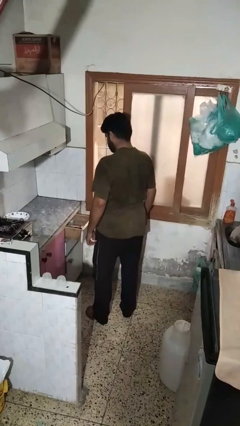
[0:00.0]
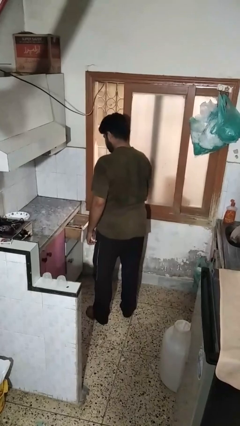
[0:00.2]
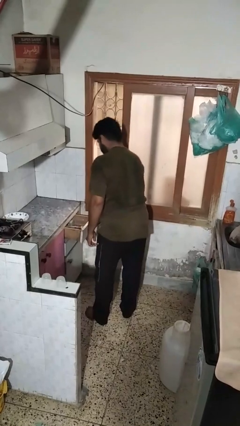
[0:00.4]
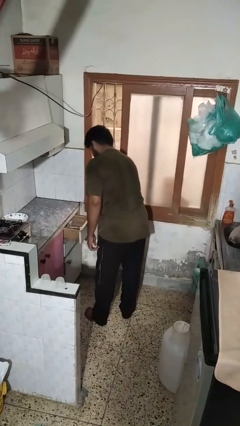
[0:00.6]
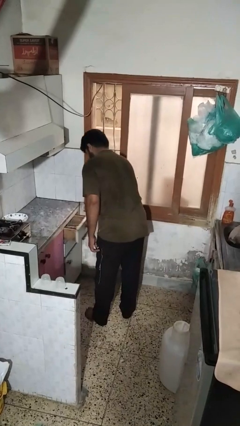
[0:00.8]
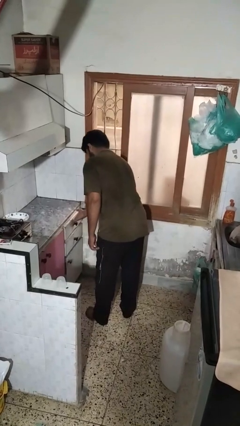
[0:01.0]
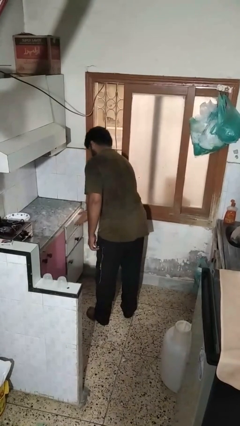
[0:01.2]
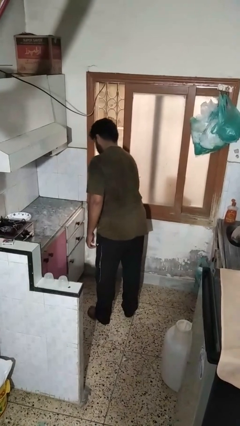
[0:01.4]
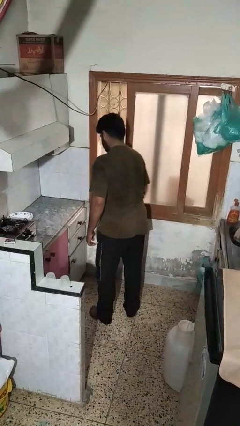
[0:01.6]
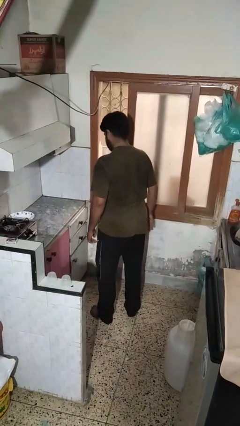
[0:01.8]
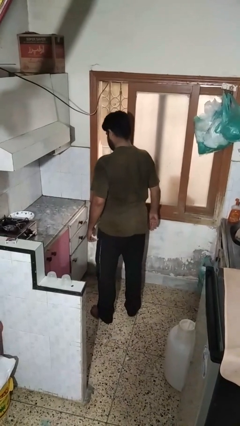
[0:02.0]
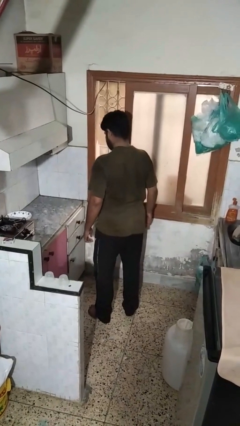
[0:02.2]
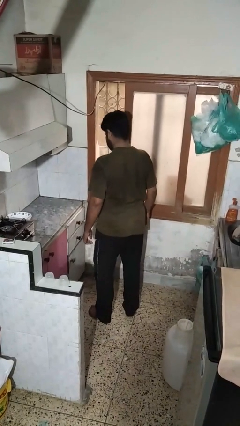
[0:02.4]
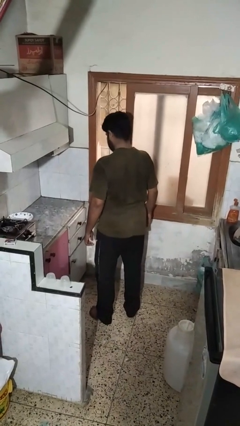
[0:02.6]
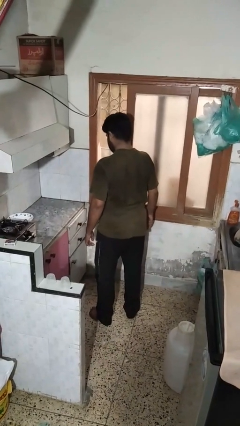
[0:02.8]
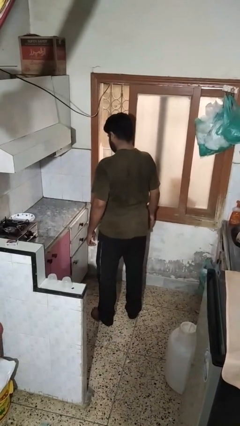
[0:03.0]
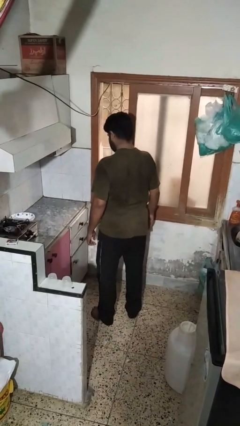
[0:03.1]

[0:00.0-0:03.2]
person closes kitchen drawer

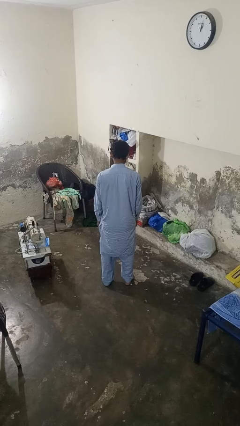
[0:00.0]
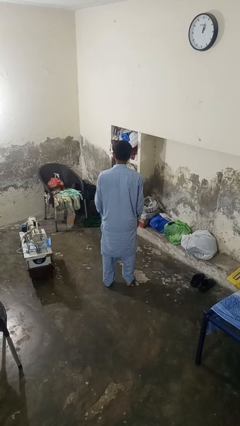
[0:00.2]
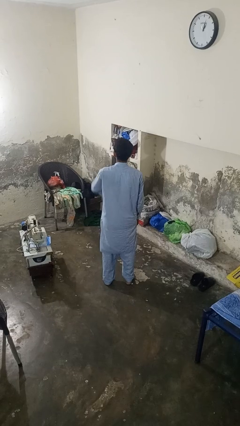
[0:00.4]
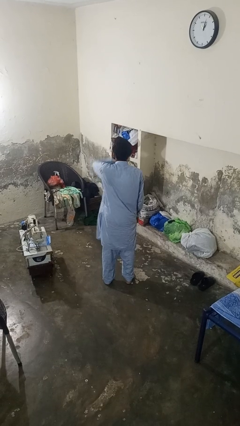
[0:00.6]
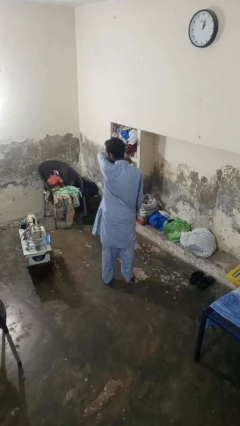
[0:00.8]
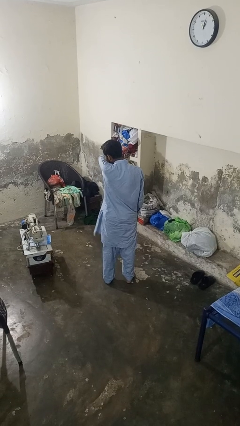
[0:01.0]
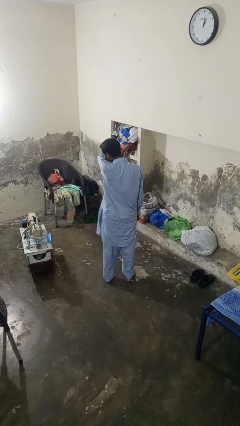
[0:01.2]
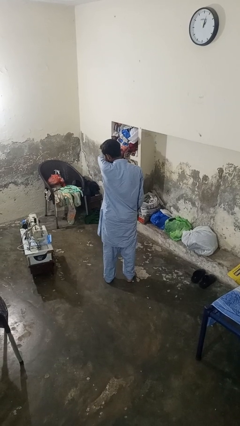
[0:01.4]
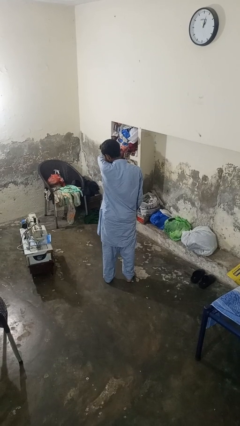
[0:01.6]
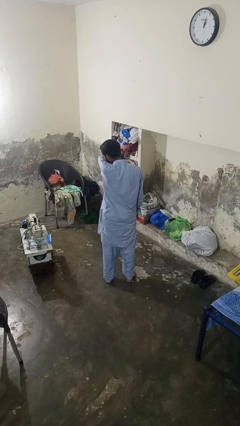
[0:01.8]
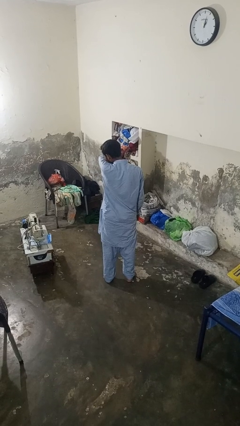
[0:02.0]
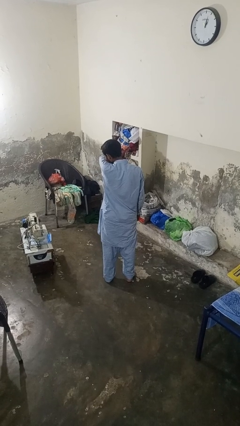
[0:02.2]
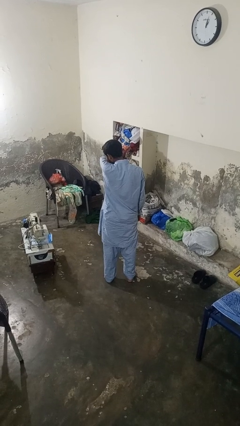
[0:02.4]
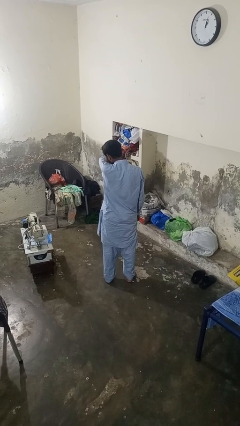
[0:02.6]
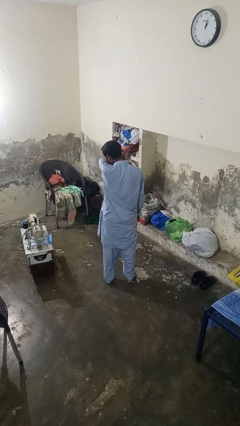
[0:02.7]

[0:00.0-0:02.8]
person sneezes into arm

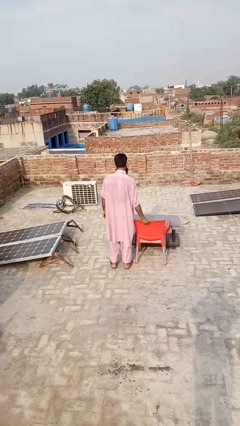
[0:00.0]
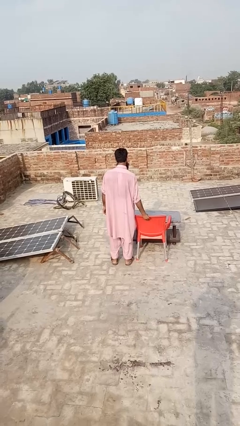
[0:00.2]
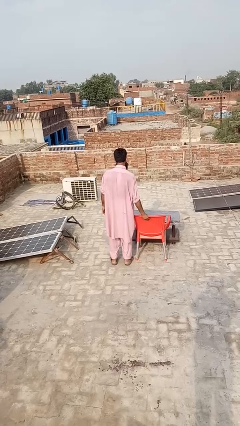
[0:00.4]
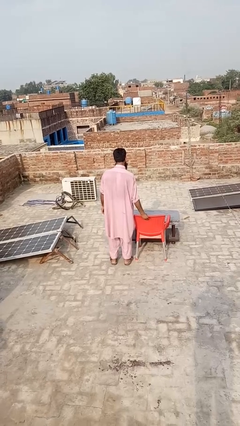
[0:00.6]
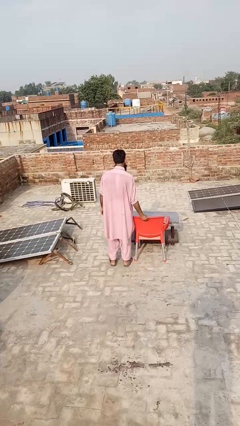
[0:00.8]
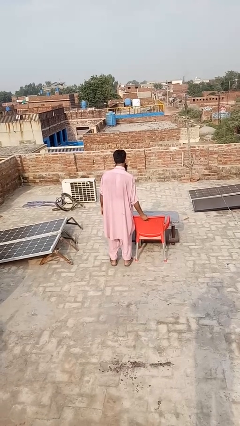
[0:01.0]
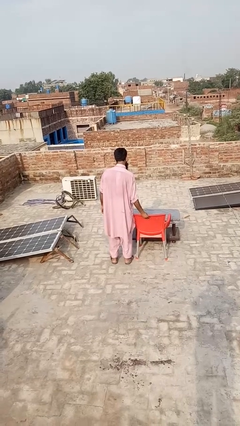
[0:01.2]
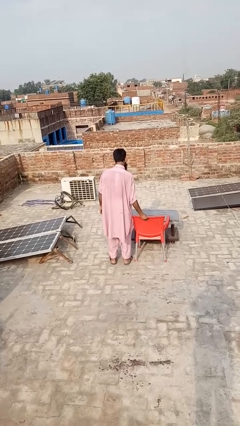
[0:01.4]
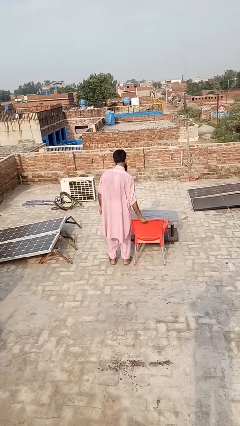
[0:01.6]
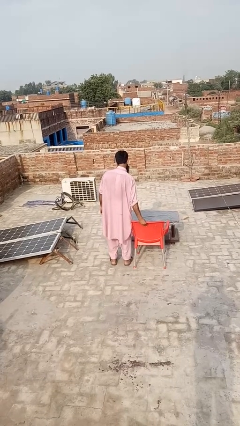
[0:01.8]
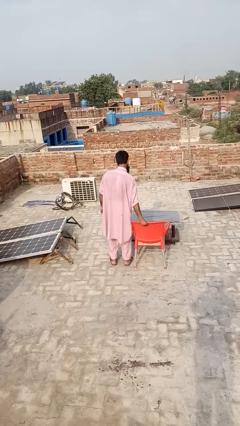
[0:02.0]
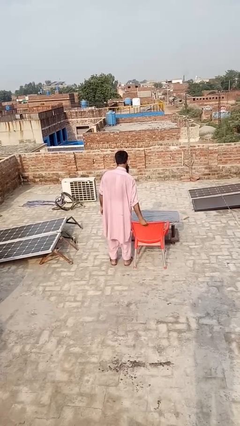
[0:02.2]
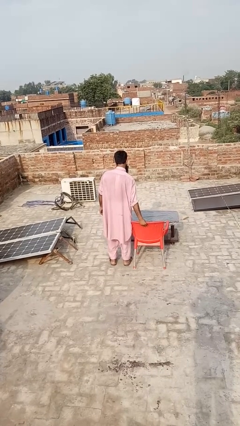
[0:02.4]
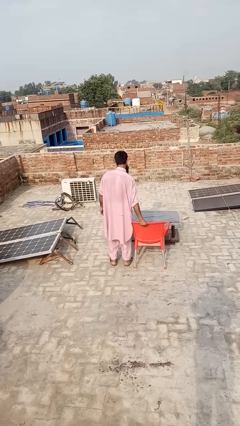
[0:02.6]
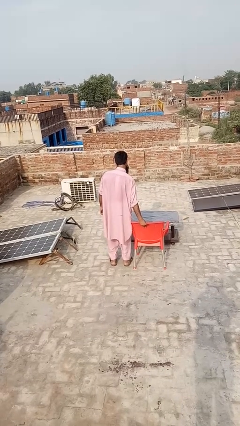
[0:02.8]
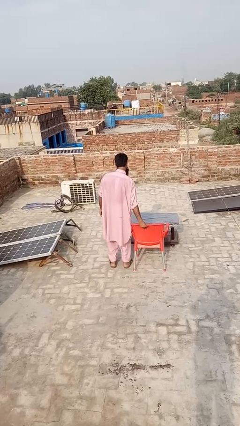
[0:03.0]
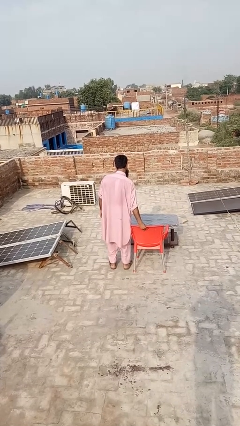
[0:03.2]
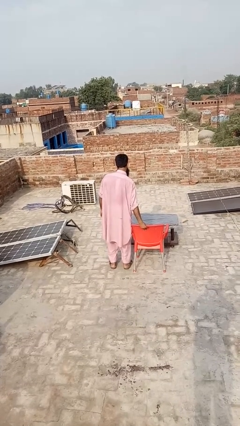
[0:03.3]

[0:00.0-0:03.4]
person pulls out chair

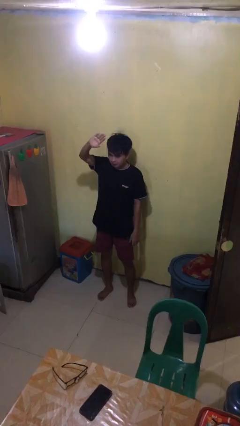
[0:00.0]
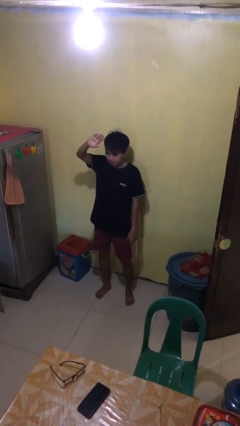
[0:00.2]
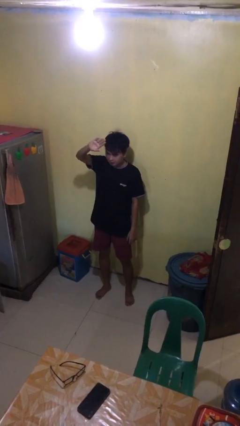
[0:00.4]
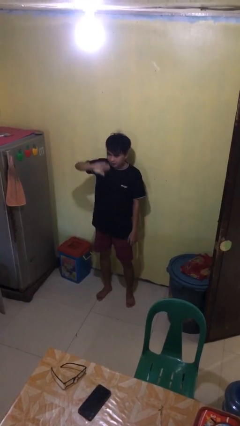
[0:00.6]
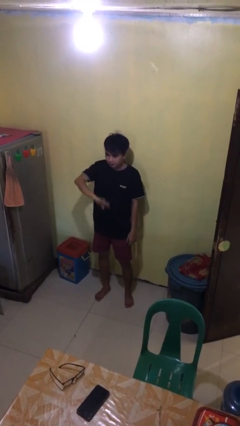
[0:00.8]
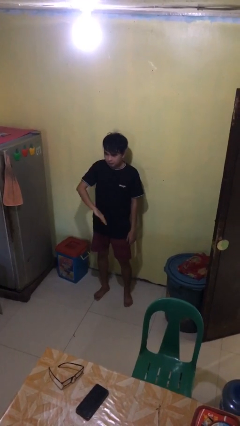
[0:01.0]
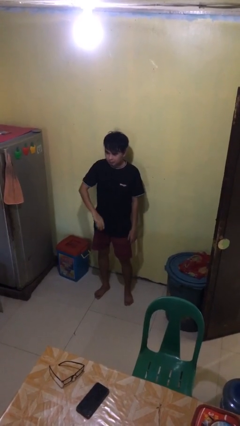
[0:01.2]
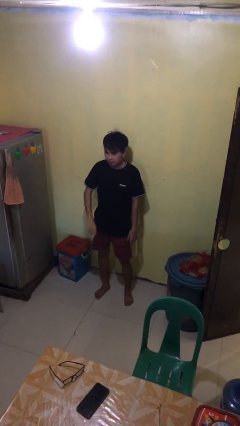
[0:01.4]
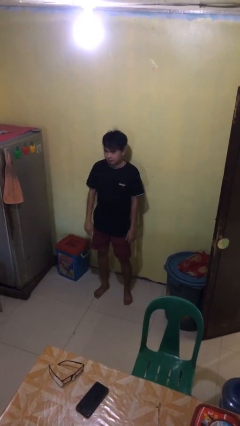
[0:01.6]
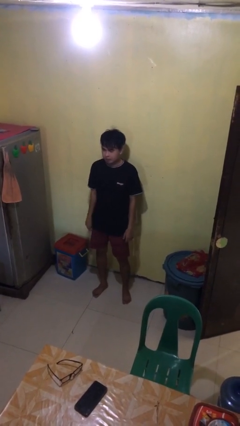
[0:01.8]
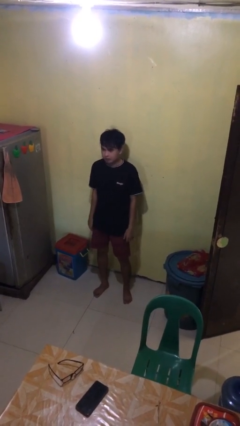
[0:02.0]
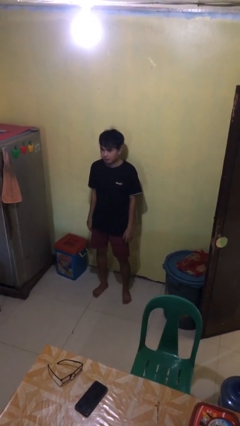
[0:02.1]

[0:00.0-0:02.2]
person gestures swipe down

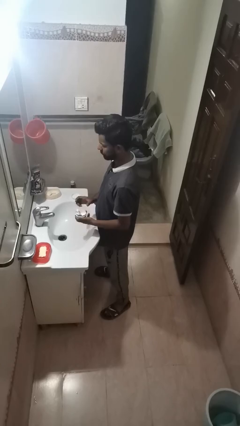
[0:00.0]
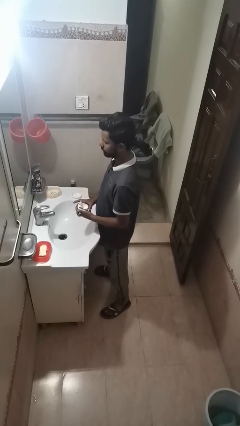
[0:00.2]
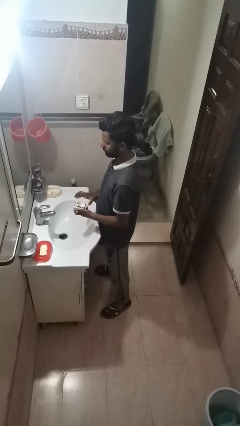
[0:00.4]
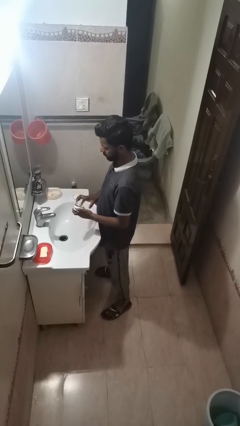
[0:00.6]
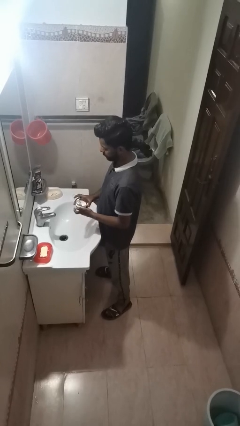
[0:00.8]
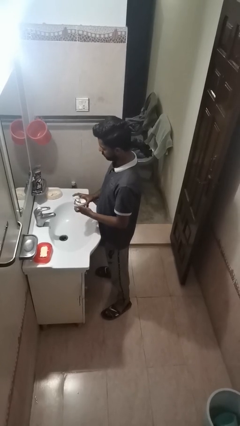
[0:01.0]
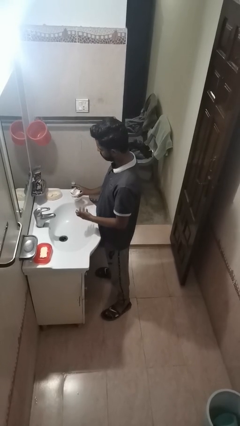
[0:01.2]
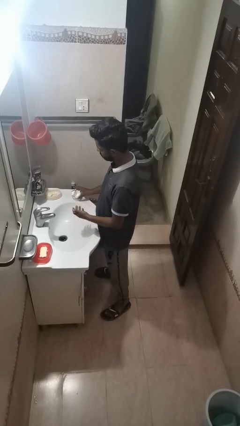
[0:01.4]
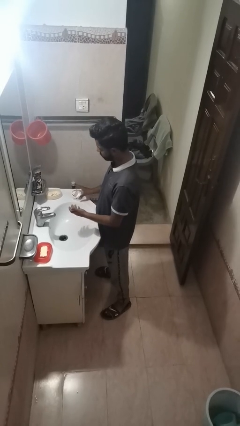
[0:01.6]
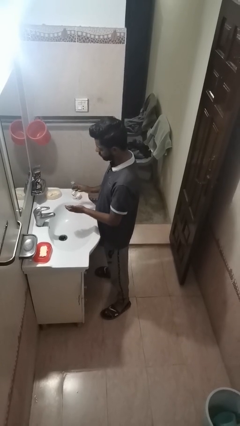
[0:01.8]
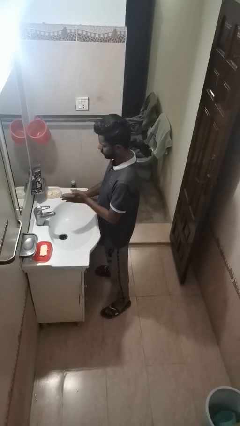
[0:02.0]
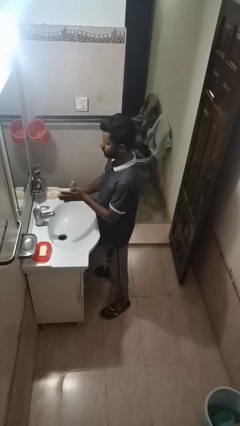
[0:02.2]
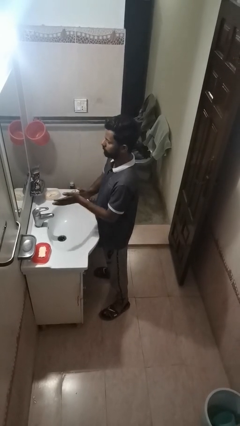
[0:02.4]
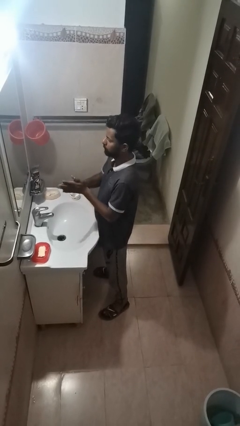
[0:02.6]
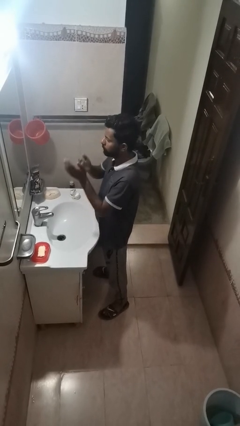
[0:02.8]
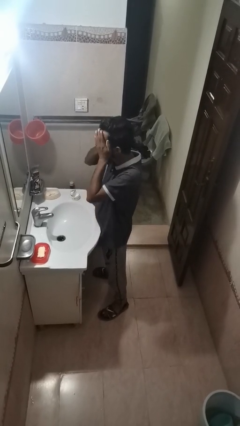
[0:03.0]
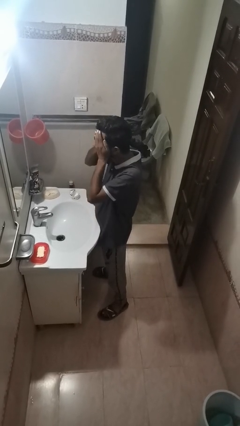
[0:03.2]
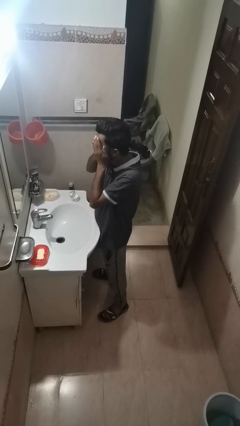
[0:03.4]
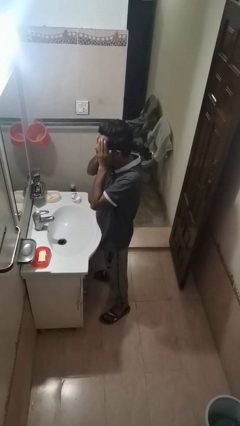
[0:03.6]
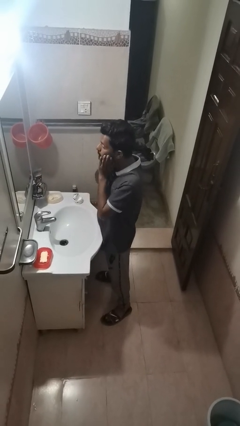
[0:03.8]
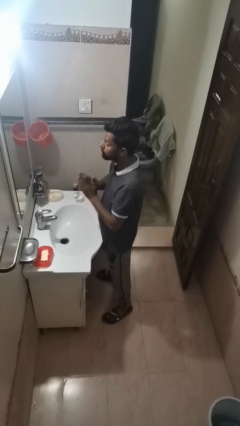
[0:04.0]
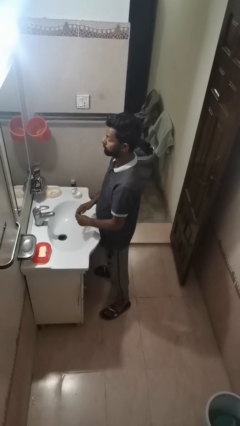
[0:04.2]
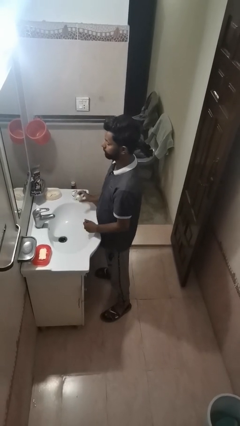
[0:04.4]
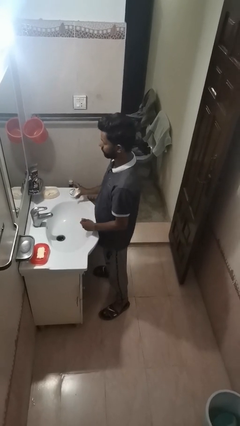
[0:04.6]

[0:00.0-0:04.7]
person applies facial moisturizer

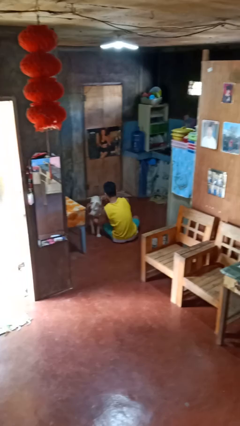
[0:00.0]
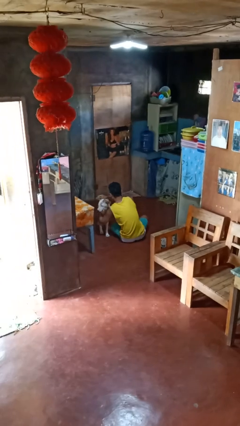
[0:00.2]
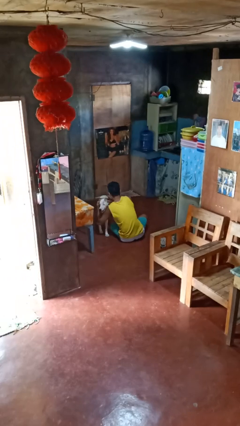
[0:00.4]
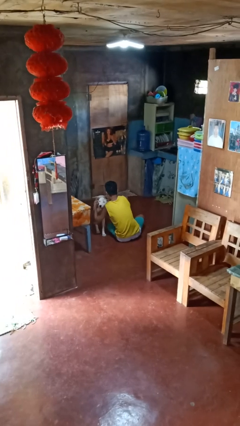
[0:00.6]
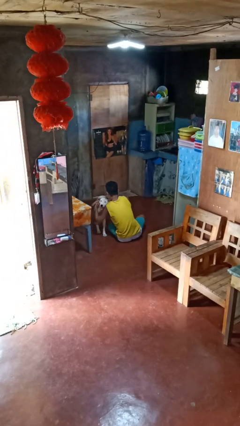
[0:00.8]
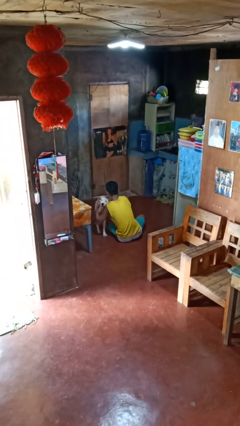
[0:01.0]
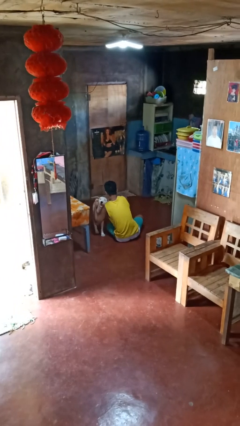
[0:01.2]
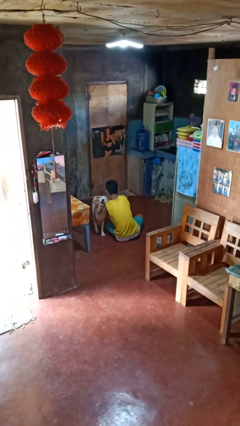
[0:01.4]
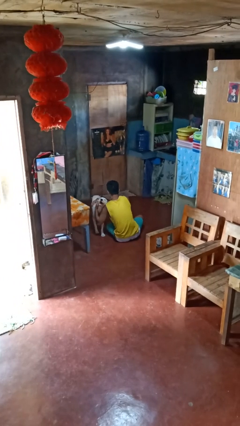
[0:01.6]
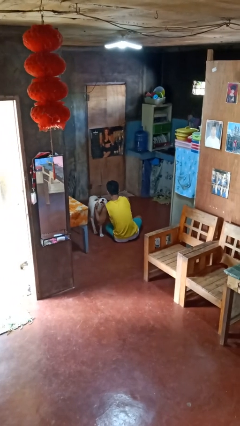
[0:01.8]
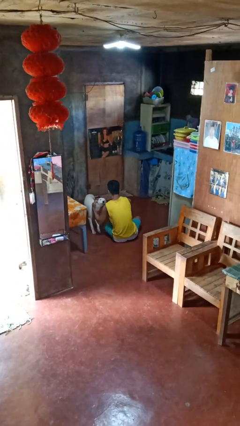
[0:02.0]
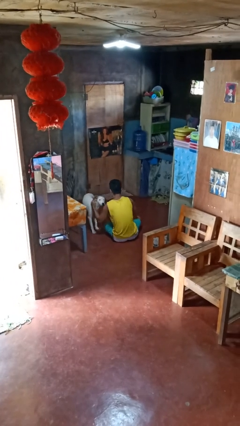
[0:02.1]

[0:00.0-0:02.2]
person hugs dog
